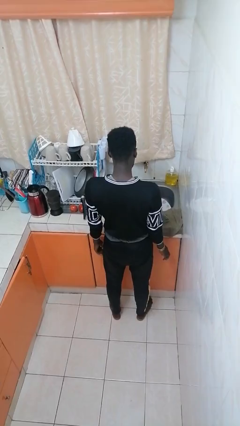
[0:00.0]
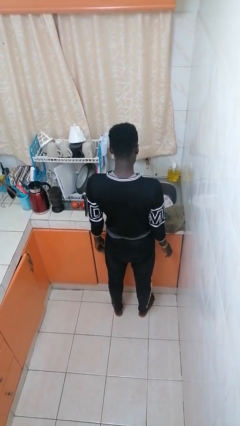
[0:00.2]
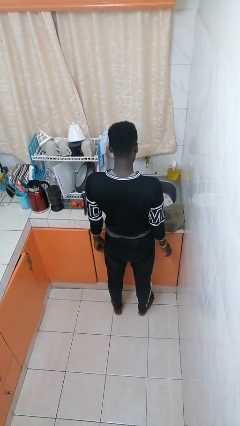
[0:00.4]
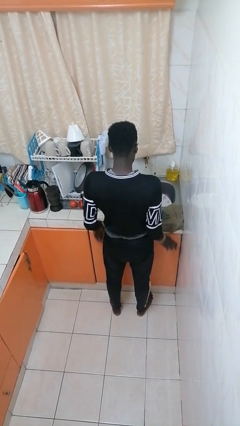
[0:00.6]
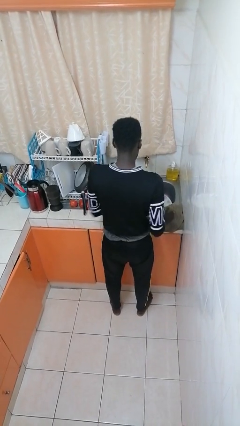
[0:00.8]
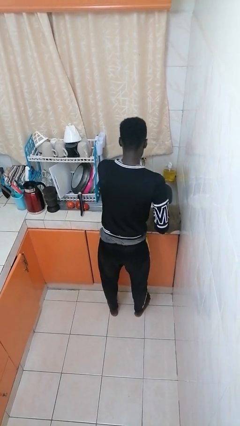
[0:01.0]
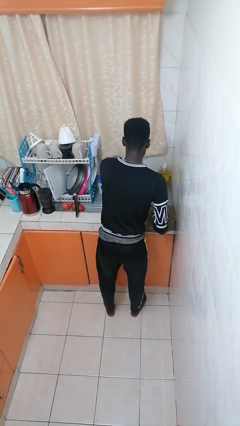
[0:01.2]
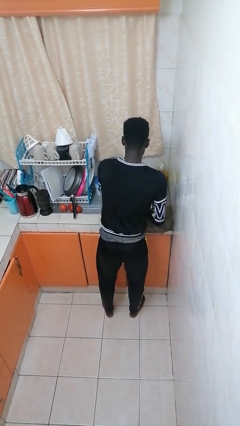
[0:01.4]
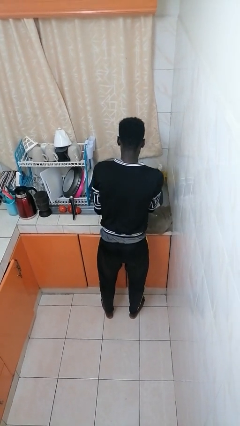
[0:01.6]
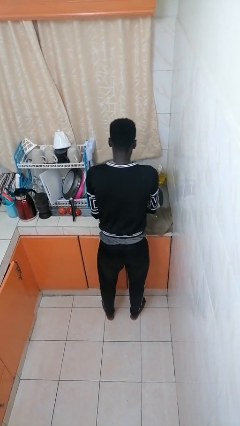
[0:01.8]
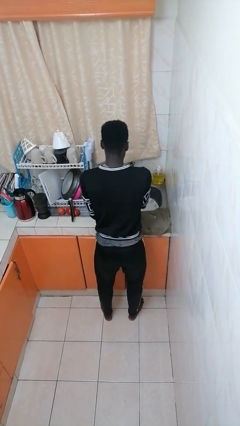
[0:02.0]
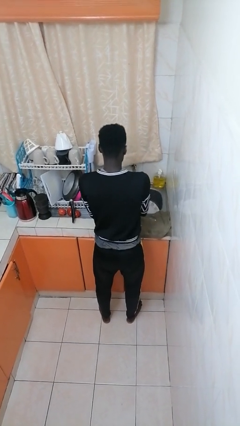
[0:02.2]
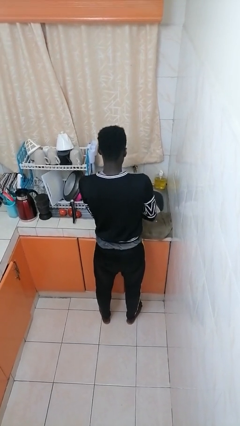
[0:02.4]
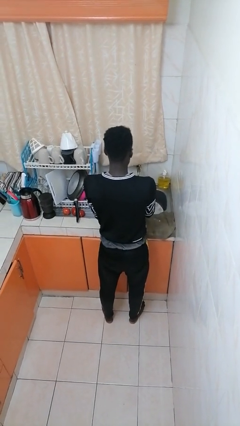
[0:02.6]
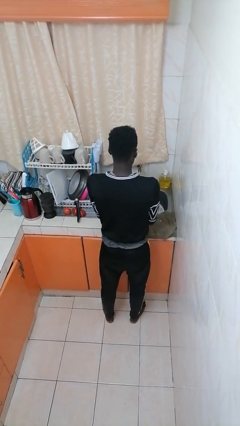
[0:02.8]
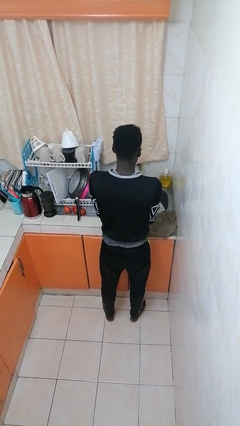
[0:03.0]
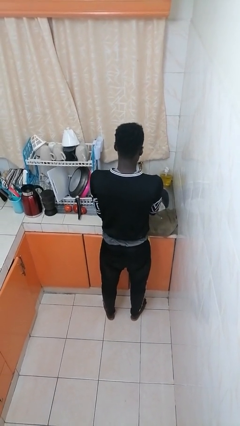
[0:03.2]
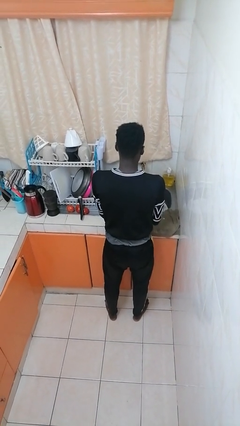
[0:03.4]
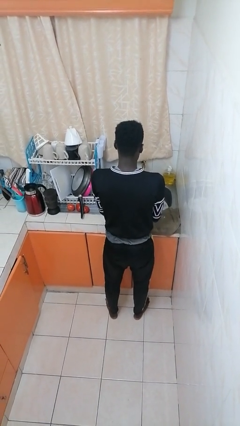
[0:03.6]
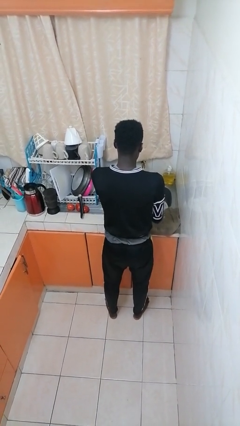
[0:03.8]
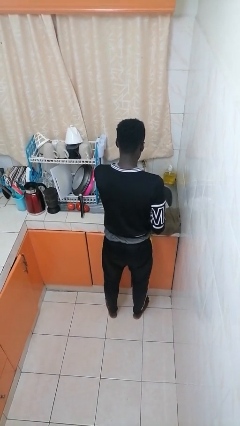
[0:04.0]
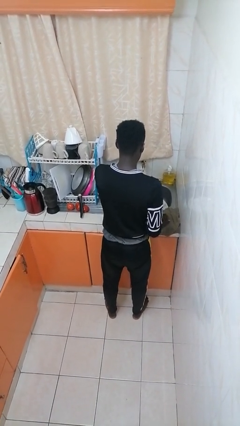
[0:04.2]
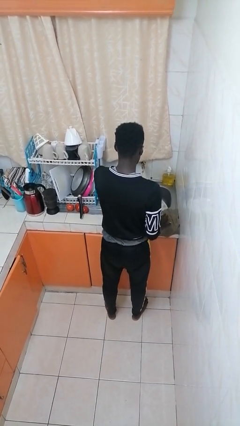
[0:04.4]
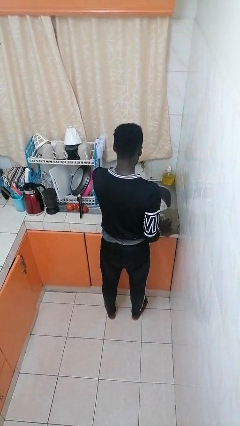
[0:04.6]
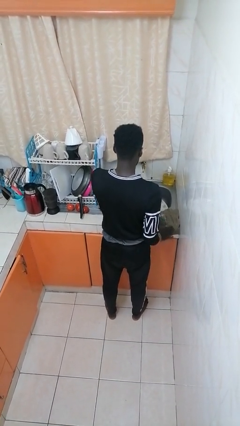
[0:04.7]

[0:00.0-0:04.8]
person washes dish

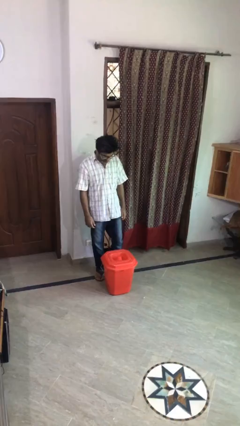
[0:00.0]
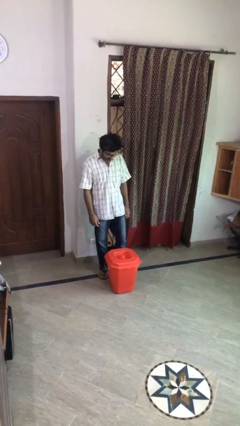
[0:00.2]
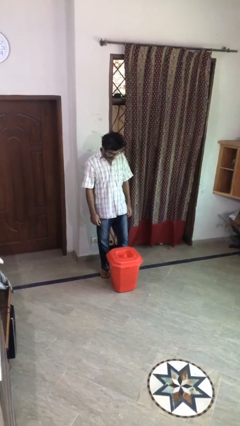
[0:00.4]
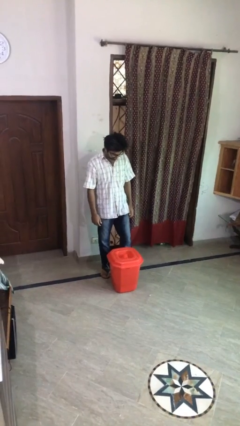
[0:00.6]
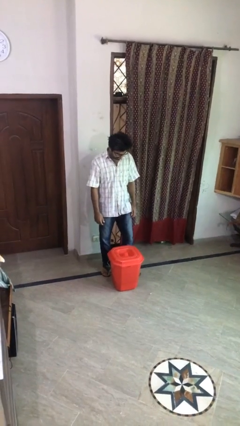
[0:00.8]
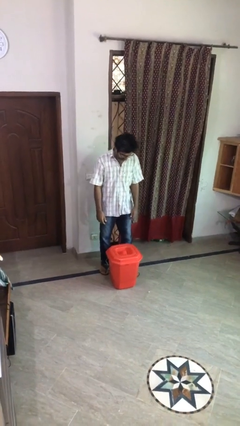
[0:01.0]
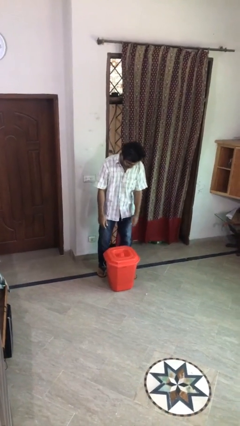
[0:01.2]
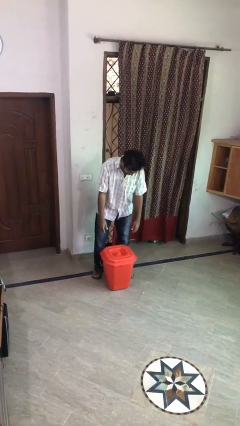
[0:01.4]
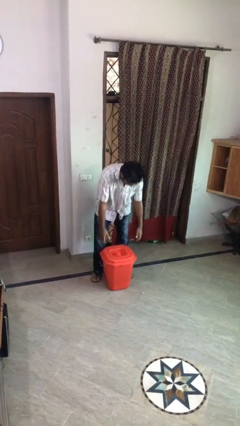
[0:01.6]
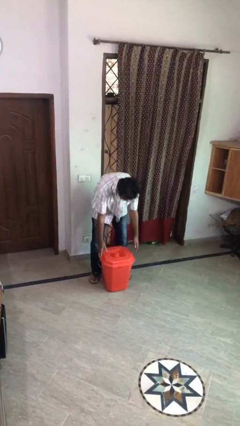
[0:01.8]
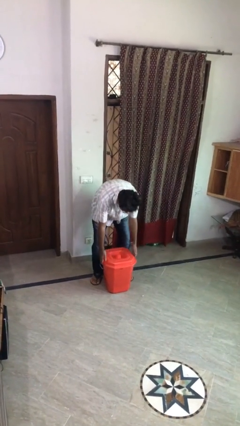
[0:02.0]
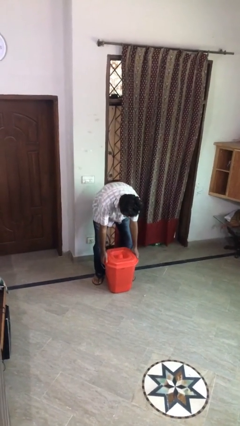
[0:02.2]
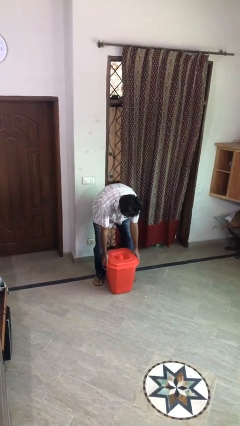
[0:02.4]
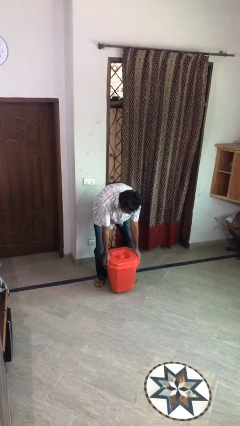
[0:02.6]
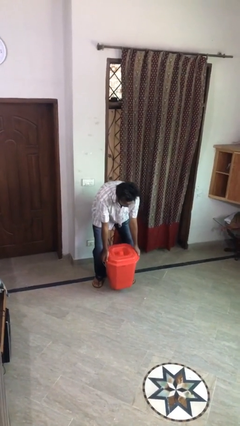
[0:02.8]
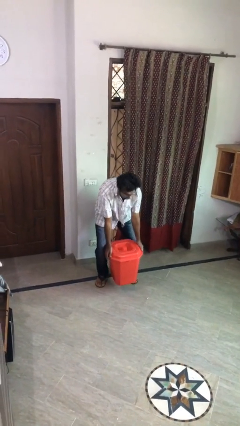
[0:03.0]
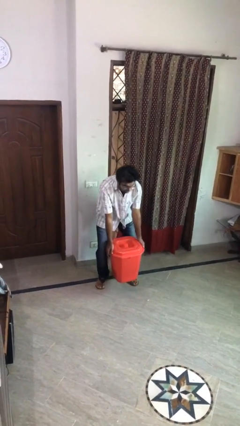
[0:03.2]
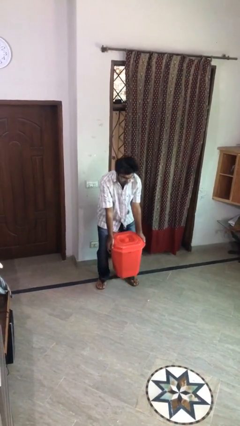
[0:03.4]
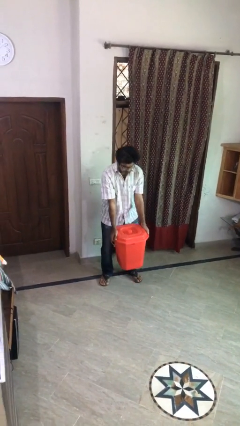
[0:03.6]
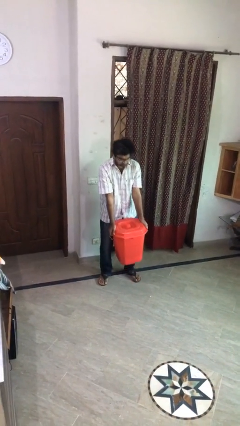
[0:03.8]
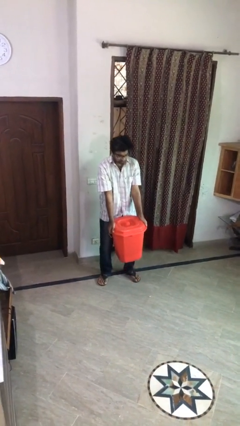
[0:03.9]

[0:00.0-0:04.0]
person picks up object from floor

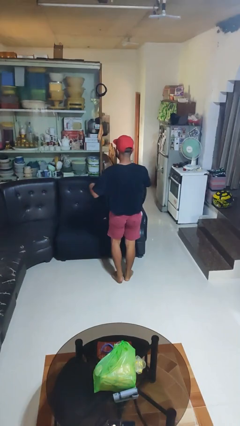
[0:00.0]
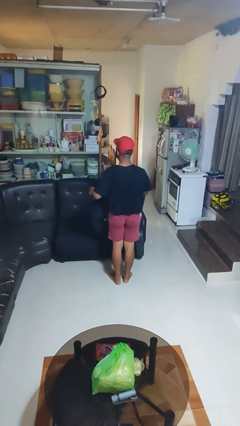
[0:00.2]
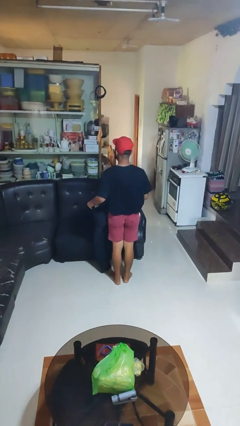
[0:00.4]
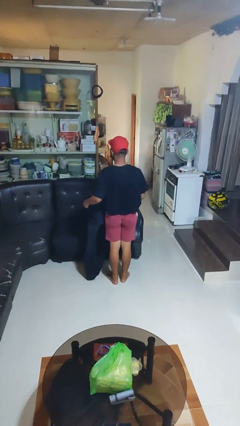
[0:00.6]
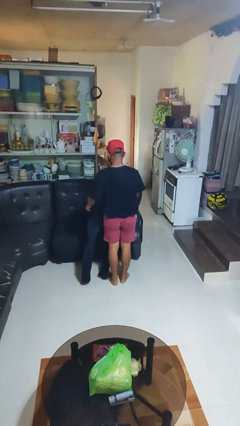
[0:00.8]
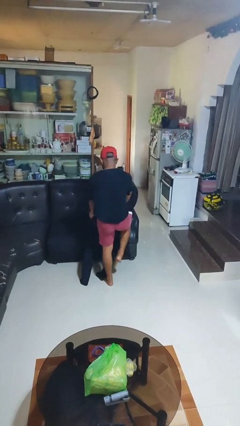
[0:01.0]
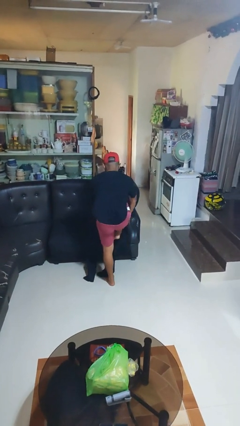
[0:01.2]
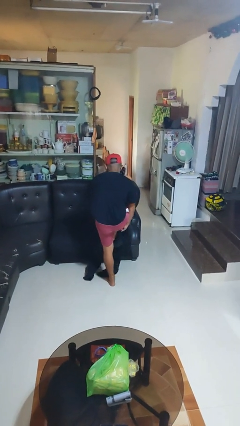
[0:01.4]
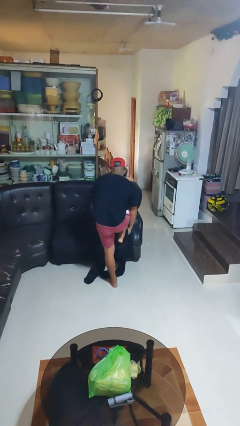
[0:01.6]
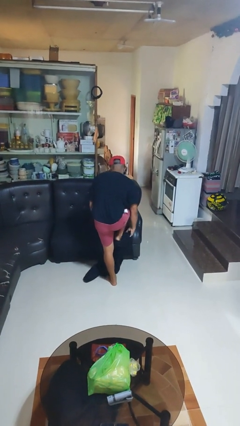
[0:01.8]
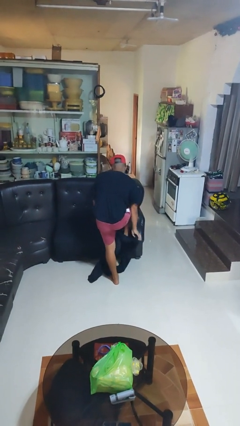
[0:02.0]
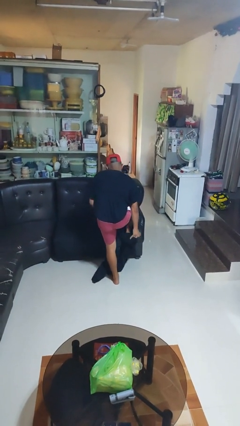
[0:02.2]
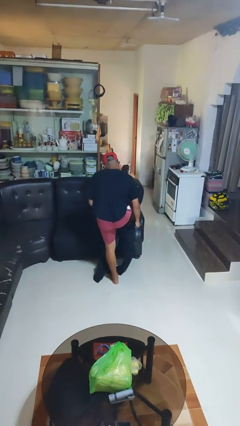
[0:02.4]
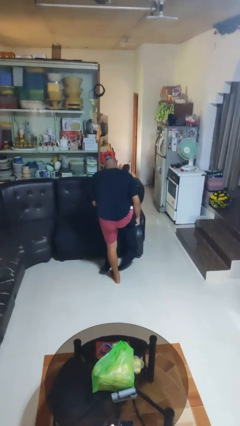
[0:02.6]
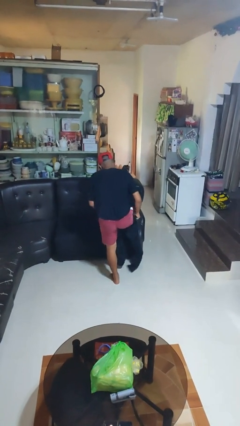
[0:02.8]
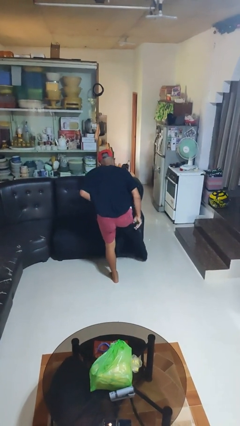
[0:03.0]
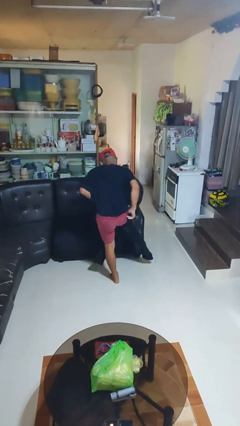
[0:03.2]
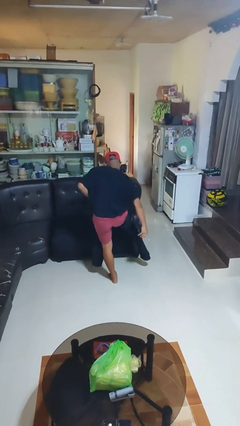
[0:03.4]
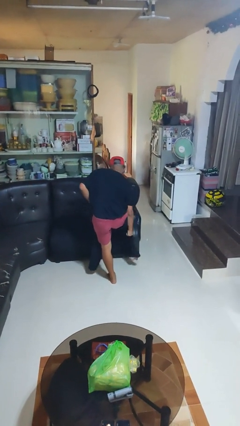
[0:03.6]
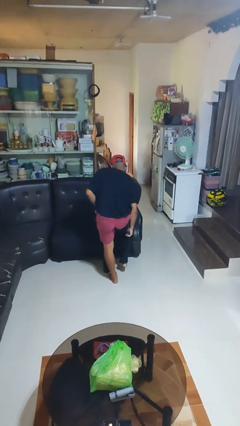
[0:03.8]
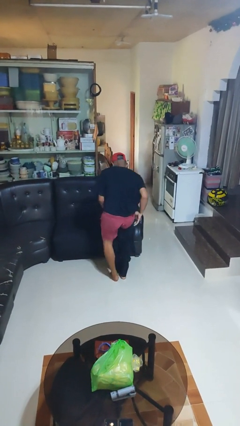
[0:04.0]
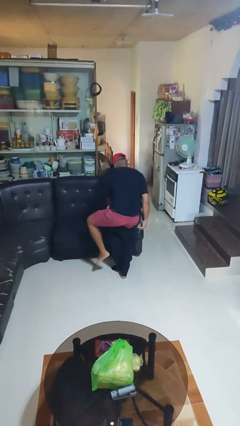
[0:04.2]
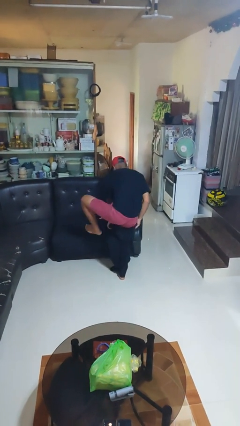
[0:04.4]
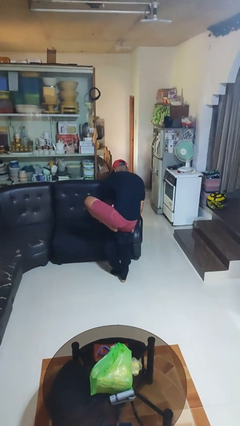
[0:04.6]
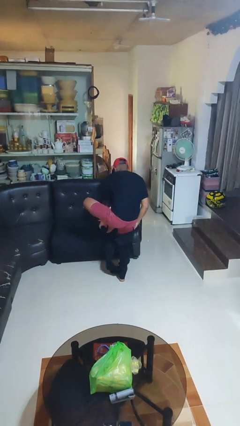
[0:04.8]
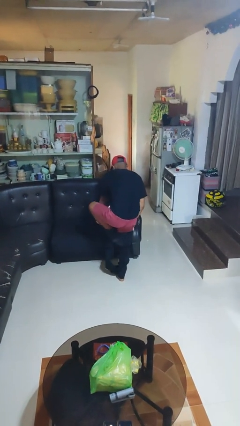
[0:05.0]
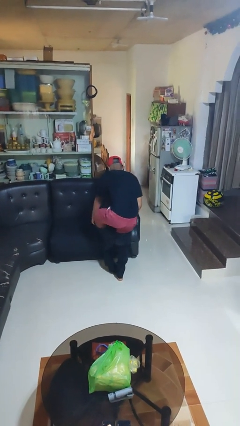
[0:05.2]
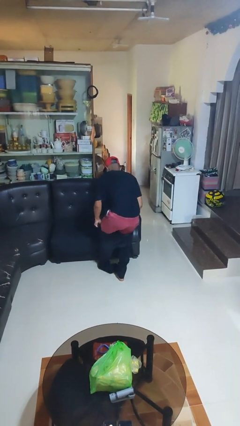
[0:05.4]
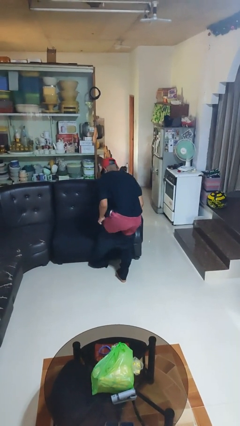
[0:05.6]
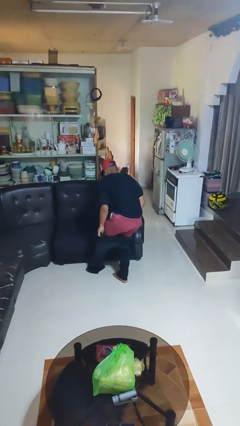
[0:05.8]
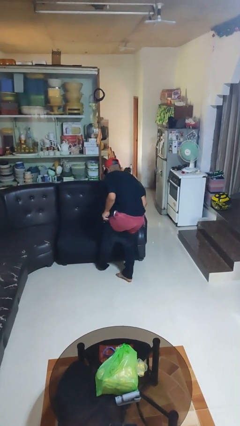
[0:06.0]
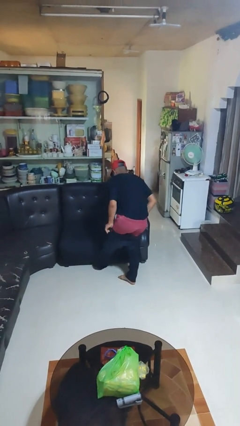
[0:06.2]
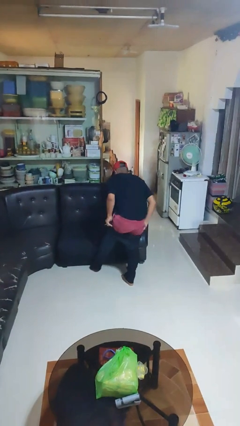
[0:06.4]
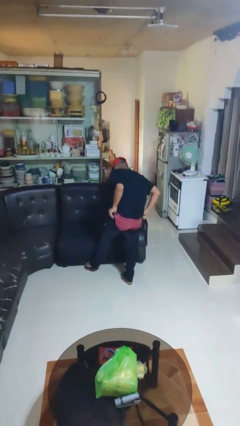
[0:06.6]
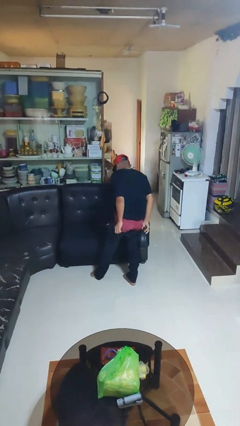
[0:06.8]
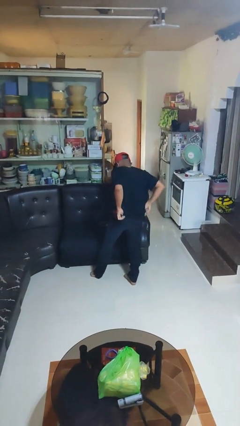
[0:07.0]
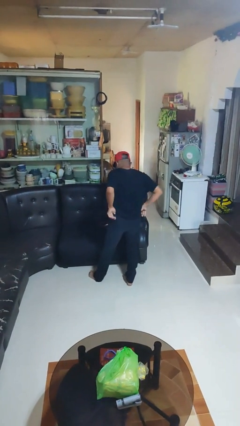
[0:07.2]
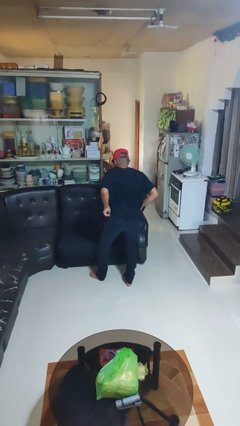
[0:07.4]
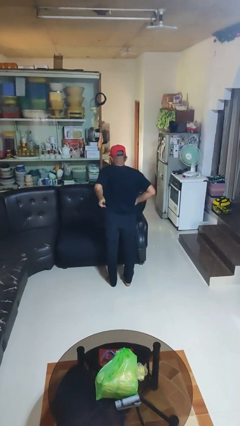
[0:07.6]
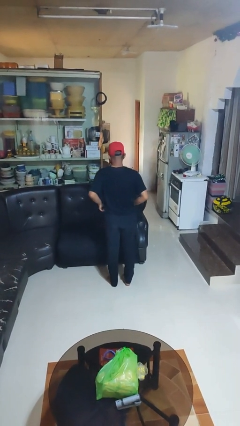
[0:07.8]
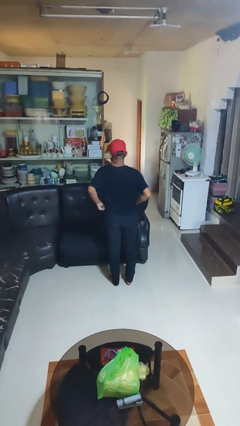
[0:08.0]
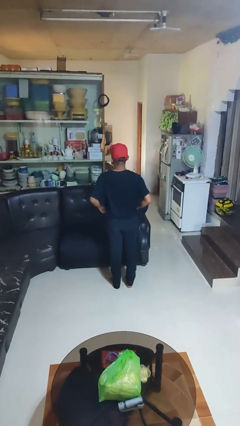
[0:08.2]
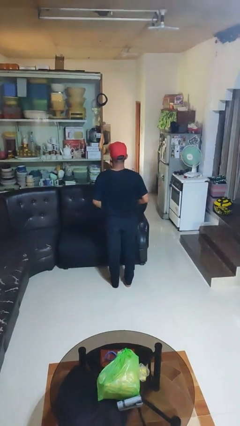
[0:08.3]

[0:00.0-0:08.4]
person puts on pants

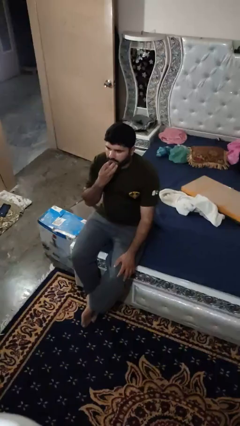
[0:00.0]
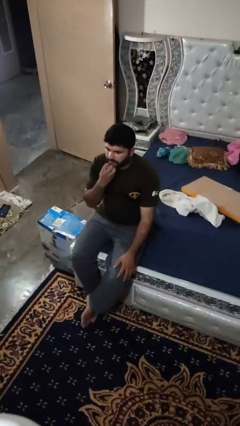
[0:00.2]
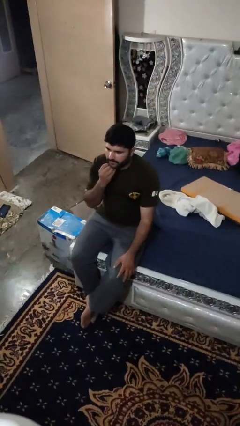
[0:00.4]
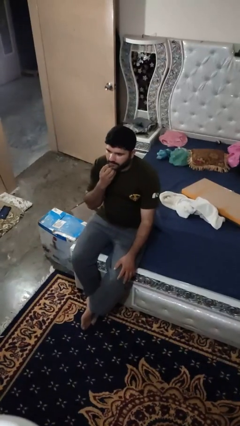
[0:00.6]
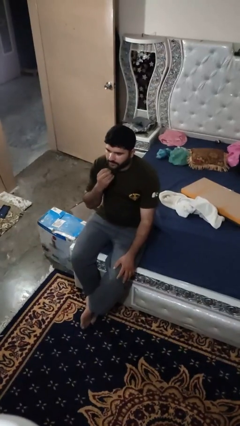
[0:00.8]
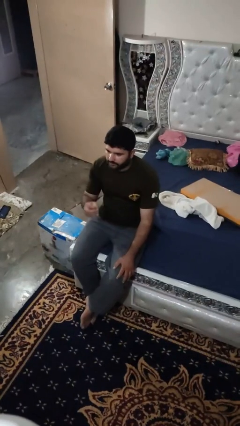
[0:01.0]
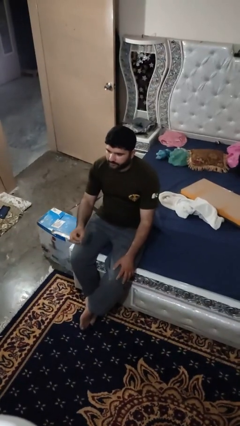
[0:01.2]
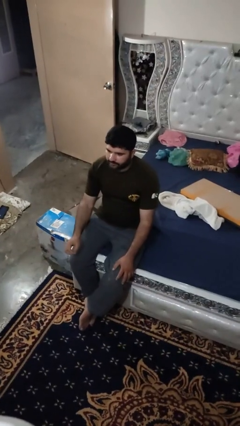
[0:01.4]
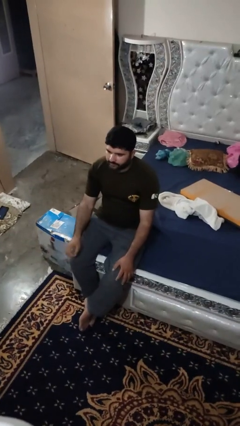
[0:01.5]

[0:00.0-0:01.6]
person strokes chin
